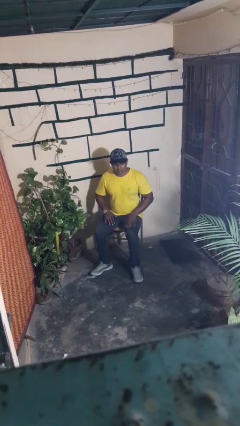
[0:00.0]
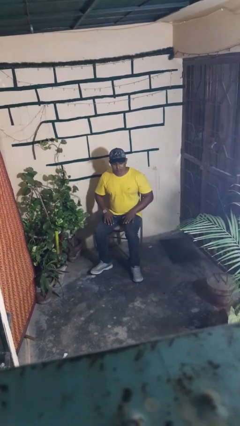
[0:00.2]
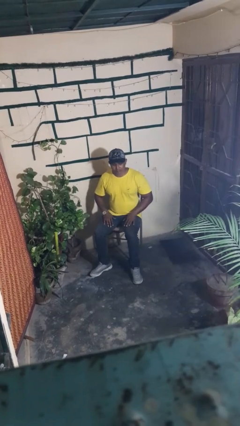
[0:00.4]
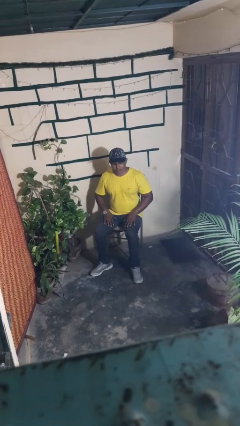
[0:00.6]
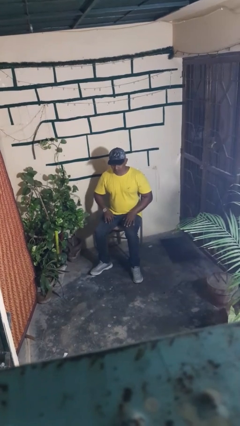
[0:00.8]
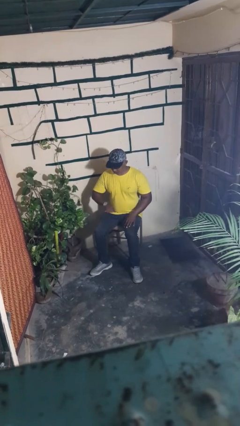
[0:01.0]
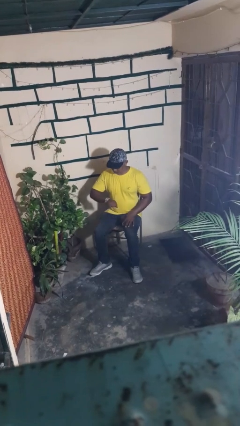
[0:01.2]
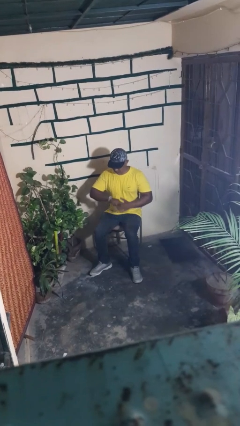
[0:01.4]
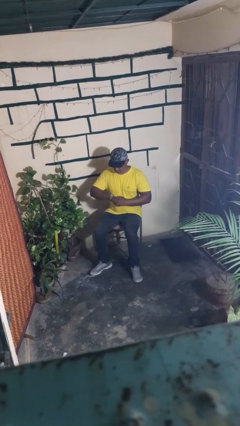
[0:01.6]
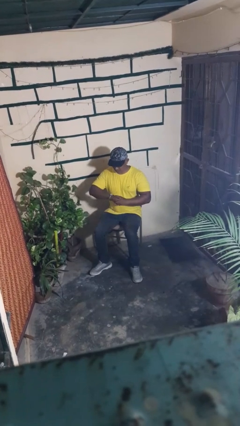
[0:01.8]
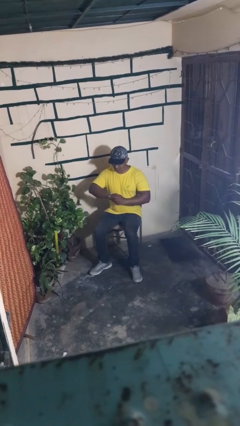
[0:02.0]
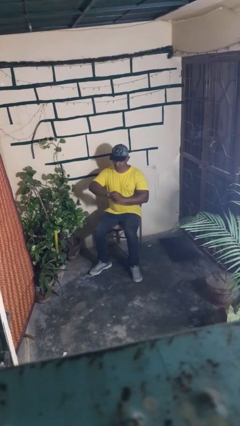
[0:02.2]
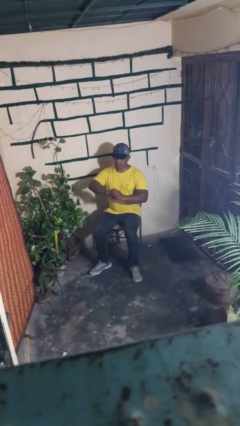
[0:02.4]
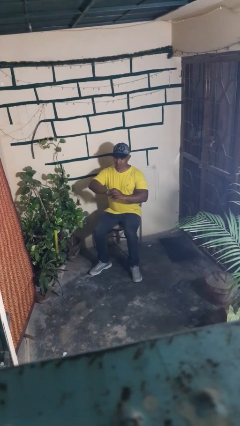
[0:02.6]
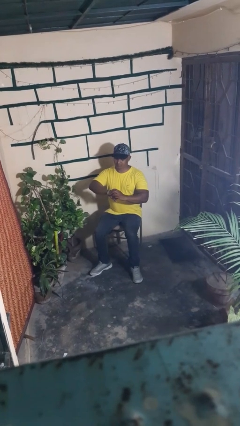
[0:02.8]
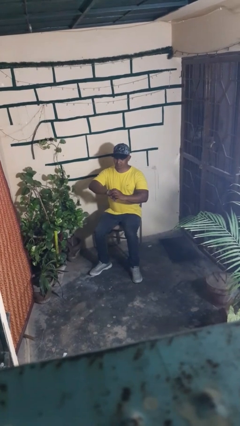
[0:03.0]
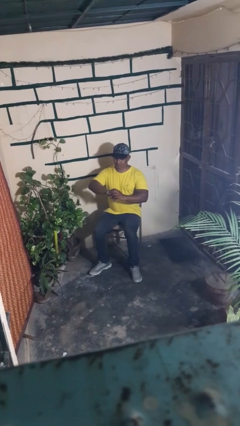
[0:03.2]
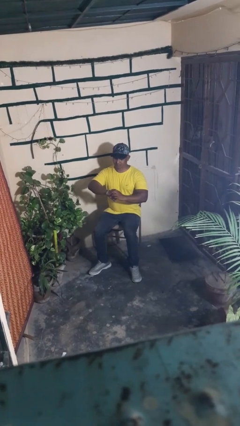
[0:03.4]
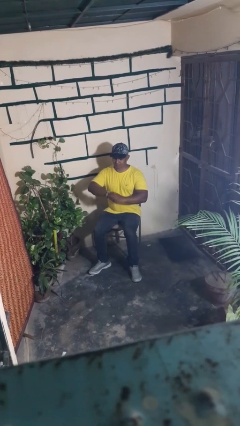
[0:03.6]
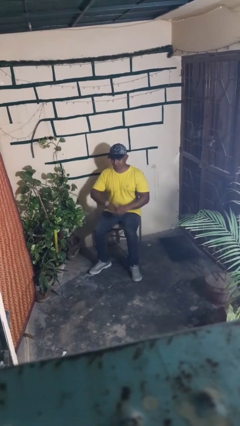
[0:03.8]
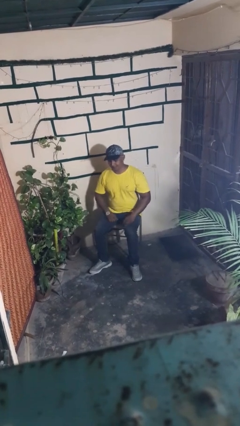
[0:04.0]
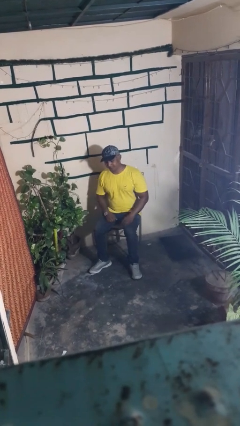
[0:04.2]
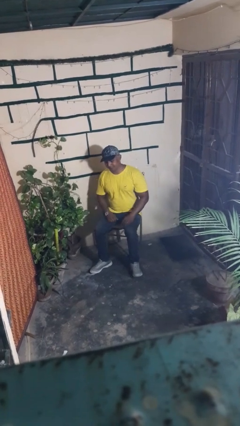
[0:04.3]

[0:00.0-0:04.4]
person looks at wristwatch

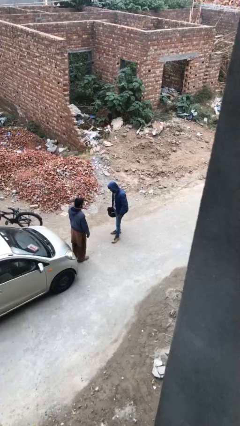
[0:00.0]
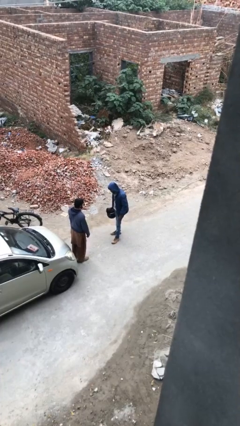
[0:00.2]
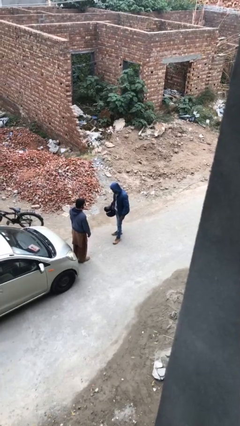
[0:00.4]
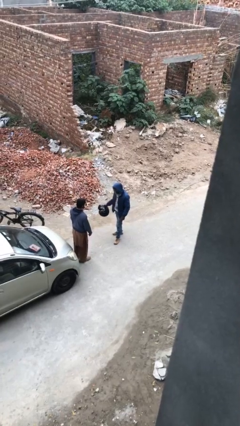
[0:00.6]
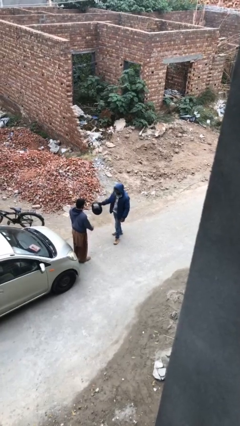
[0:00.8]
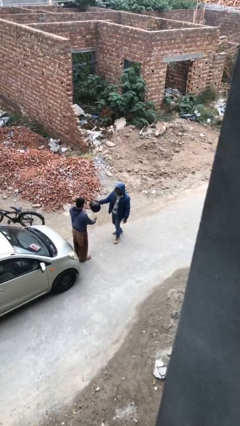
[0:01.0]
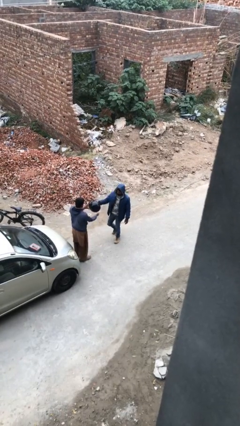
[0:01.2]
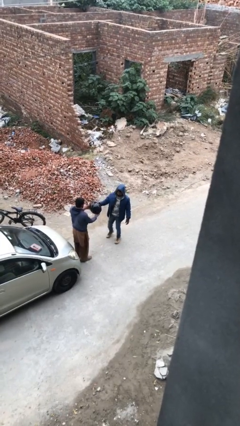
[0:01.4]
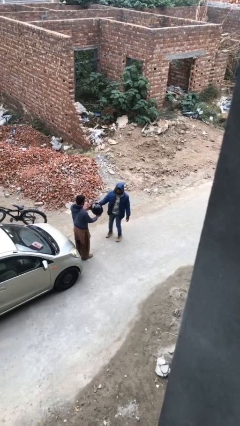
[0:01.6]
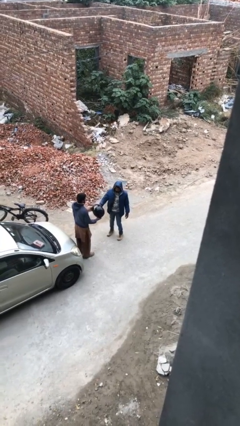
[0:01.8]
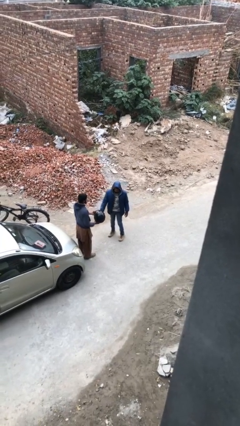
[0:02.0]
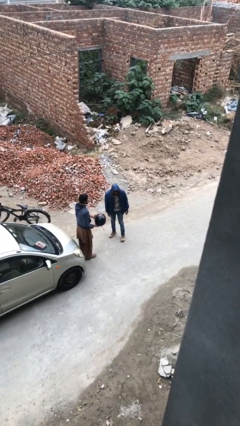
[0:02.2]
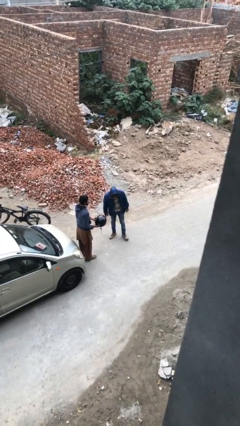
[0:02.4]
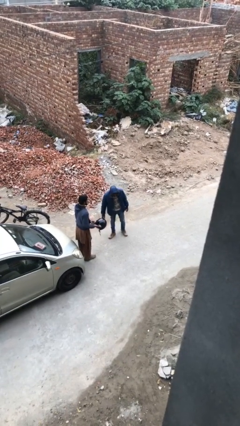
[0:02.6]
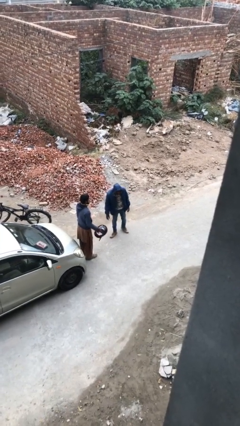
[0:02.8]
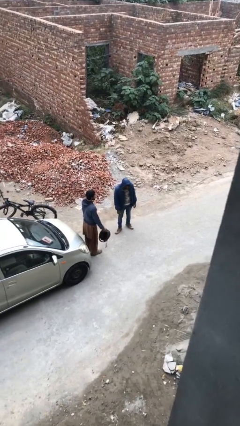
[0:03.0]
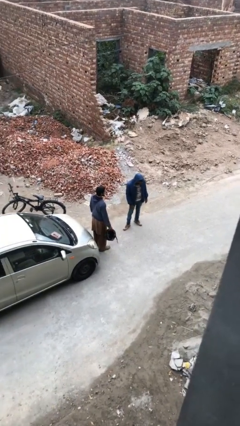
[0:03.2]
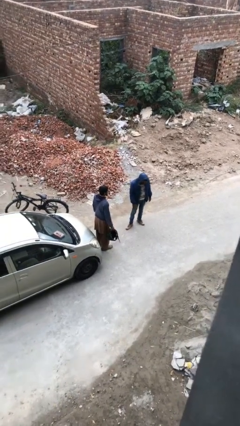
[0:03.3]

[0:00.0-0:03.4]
person transfers object to person

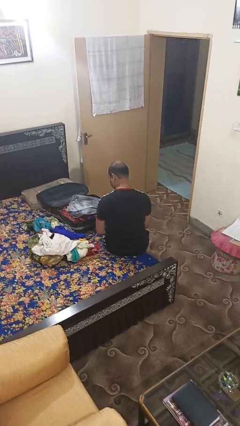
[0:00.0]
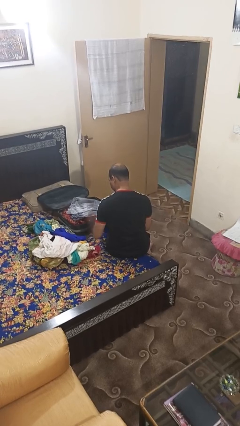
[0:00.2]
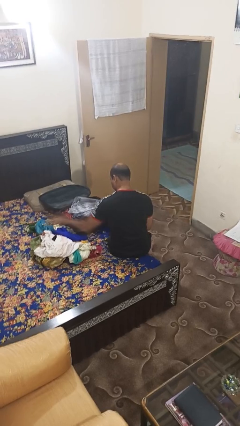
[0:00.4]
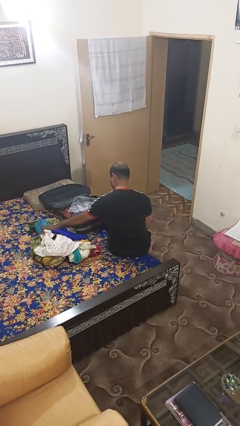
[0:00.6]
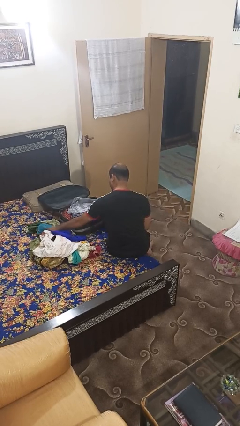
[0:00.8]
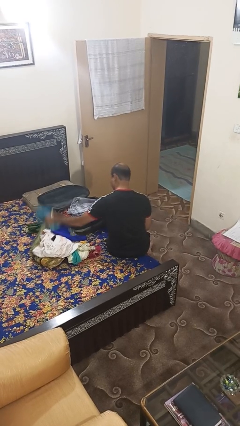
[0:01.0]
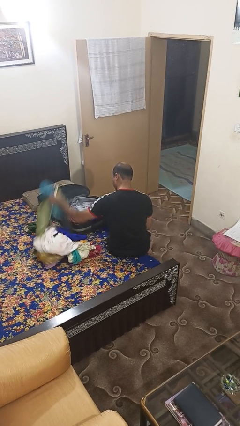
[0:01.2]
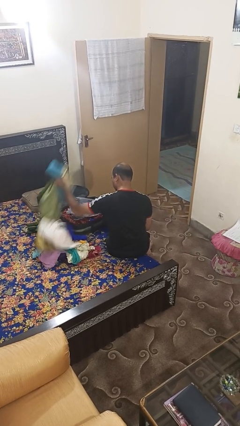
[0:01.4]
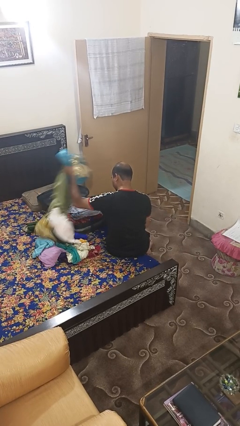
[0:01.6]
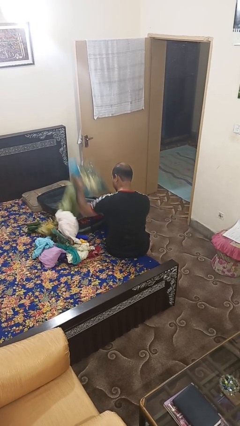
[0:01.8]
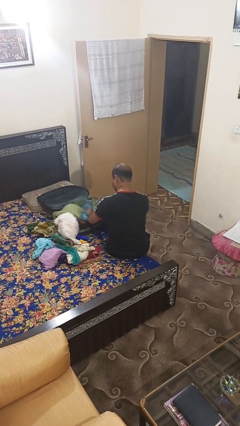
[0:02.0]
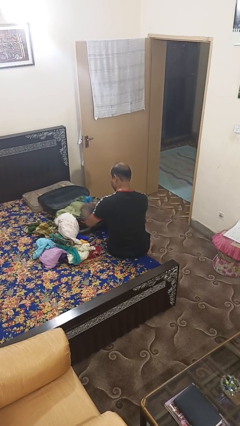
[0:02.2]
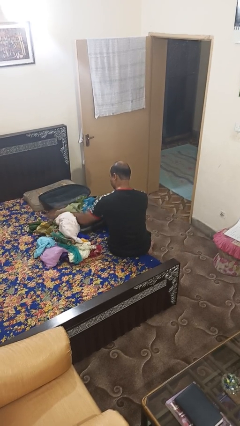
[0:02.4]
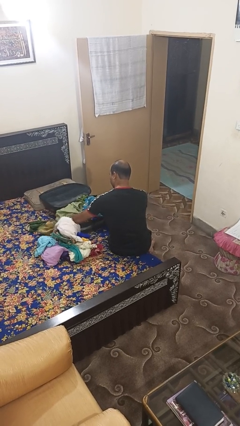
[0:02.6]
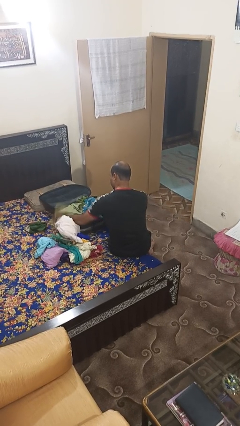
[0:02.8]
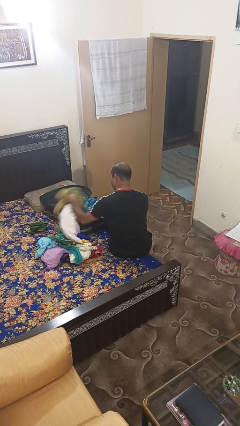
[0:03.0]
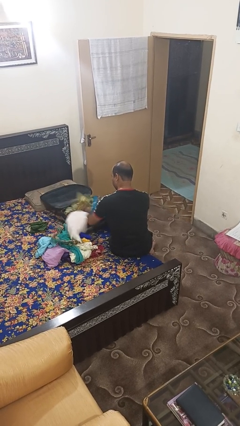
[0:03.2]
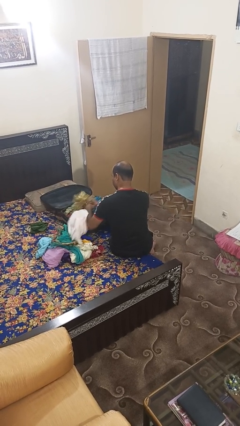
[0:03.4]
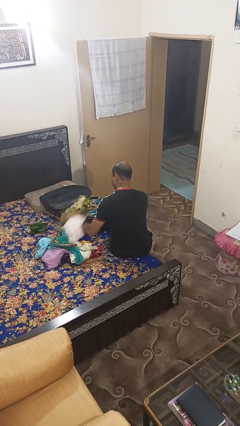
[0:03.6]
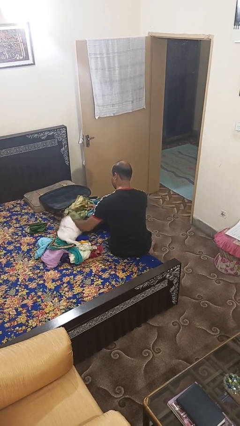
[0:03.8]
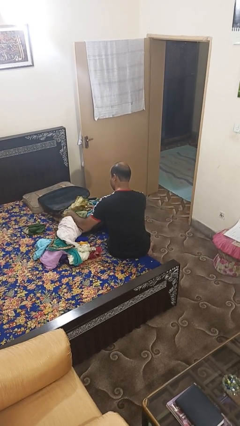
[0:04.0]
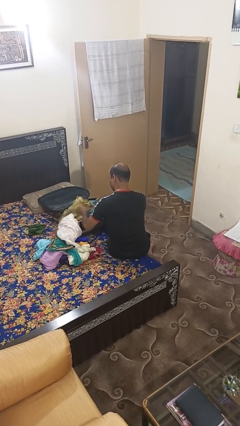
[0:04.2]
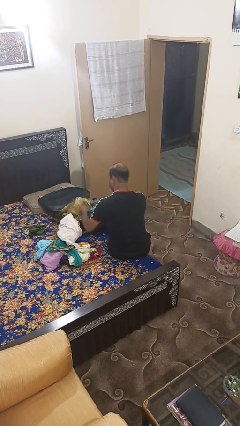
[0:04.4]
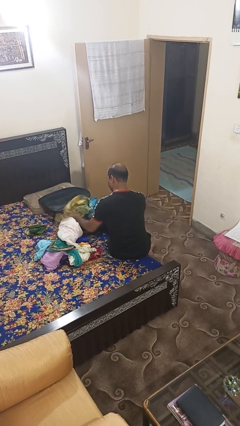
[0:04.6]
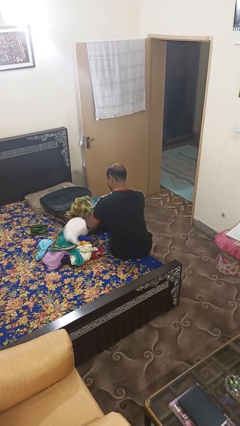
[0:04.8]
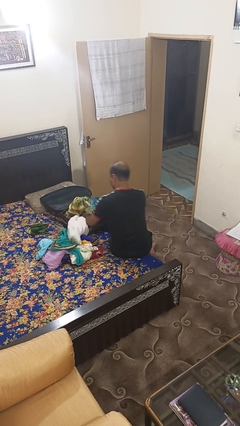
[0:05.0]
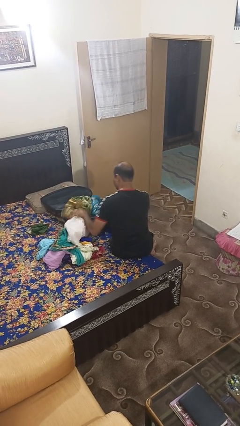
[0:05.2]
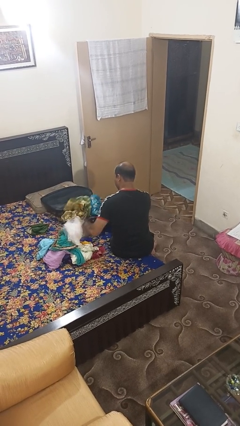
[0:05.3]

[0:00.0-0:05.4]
person loads clothes into suitcase

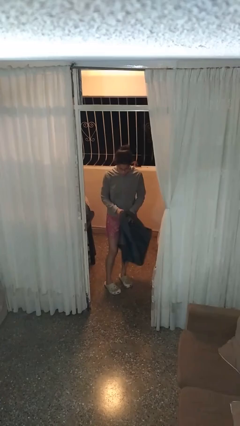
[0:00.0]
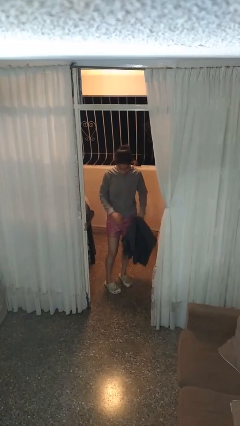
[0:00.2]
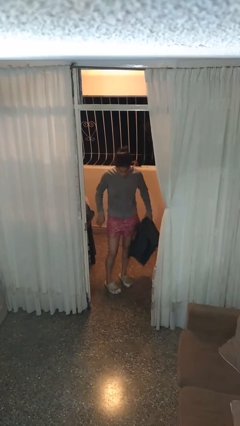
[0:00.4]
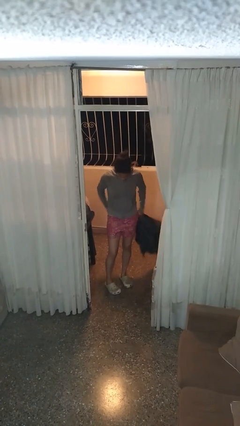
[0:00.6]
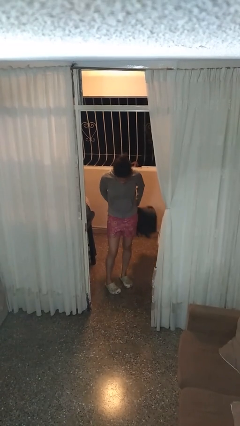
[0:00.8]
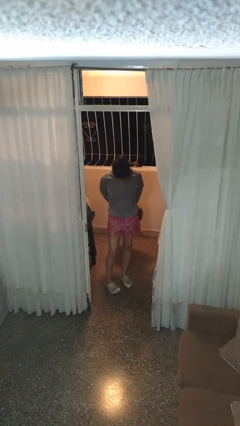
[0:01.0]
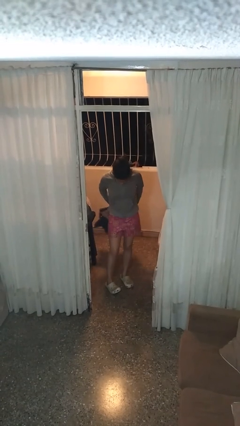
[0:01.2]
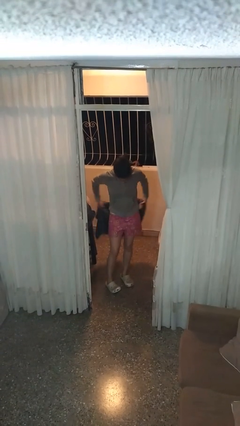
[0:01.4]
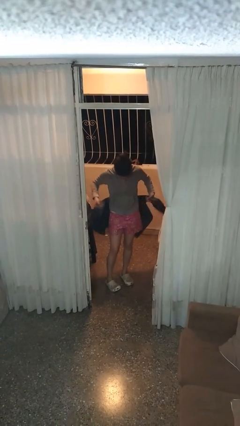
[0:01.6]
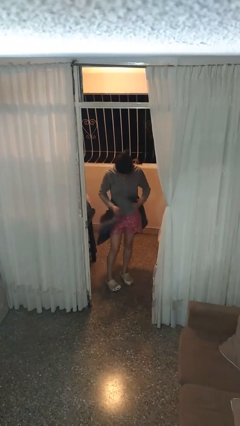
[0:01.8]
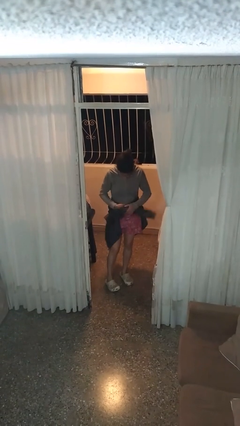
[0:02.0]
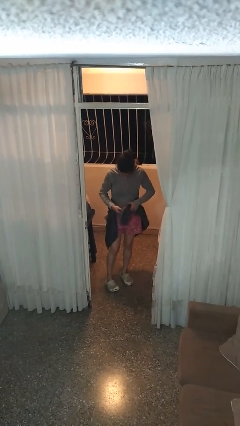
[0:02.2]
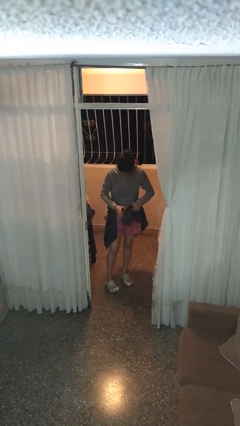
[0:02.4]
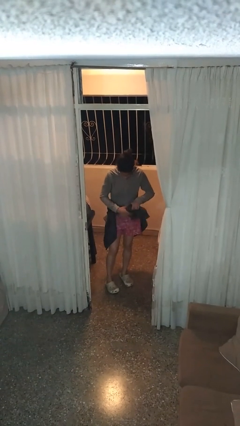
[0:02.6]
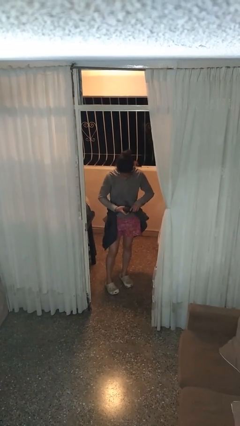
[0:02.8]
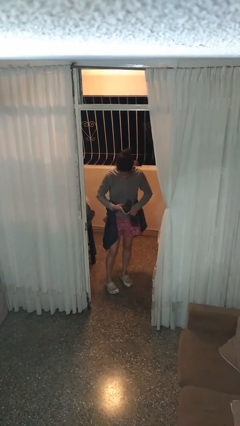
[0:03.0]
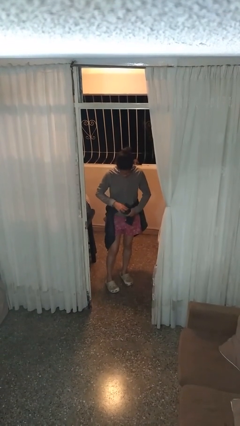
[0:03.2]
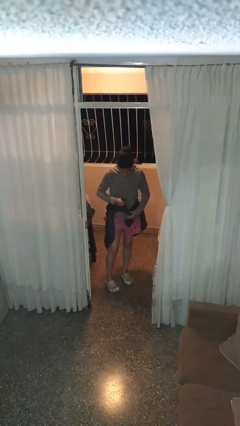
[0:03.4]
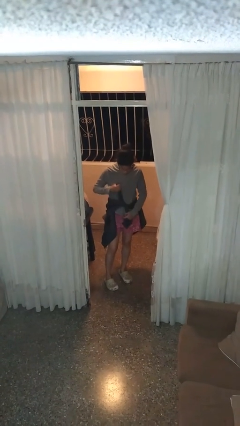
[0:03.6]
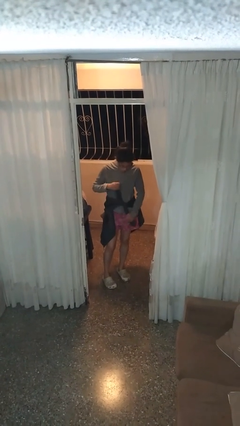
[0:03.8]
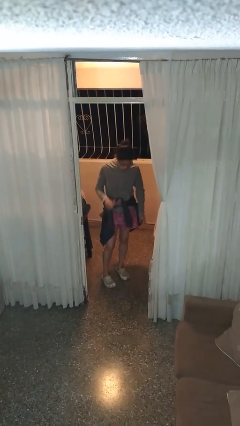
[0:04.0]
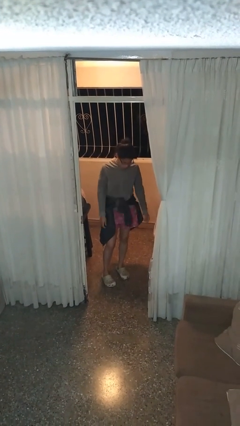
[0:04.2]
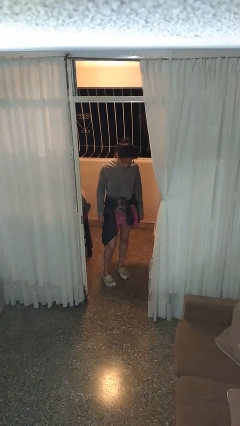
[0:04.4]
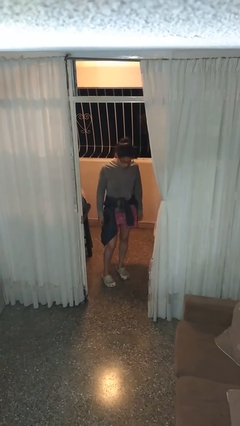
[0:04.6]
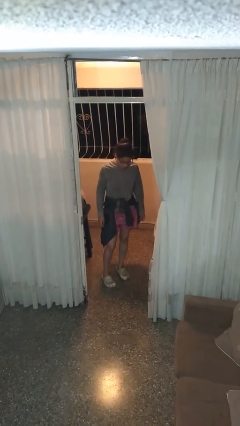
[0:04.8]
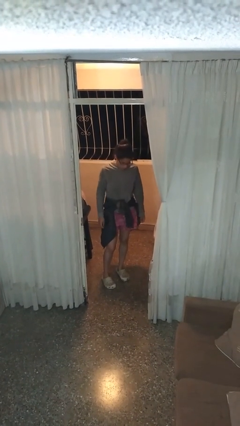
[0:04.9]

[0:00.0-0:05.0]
person ties jacket around waist
